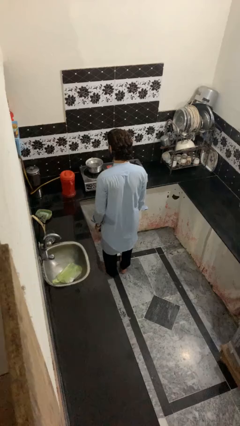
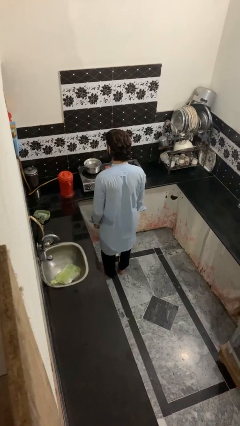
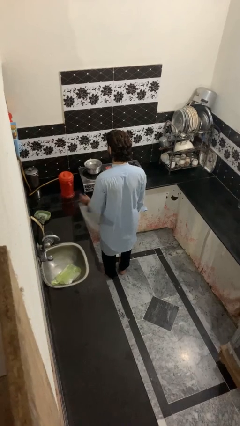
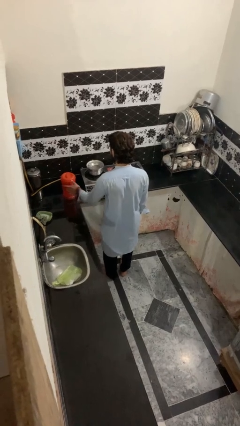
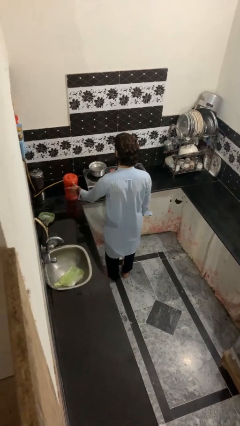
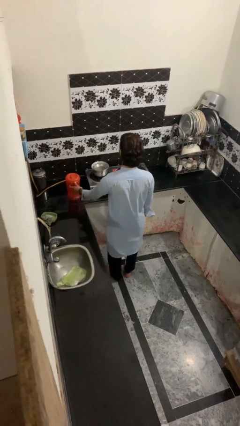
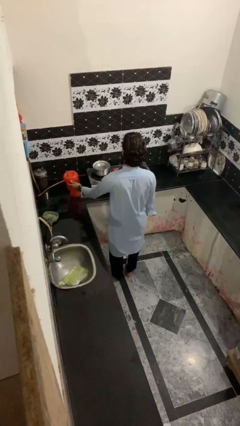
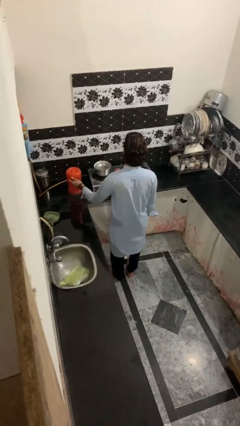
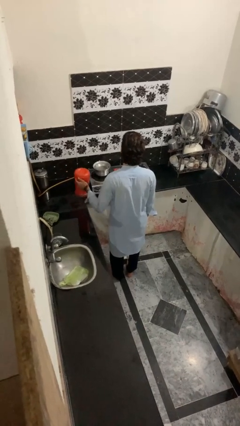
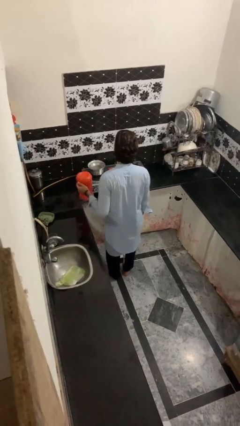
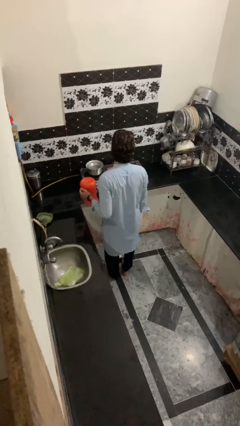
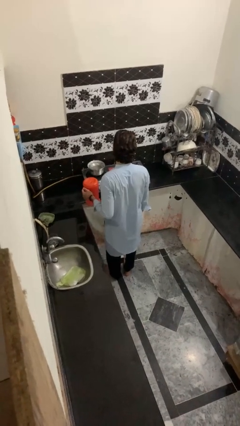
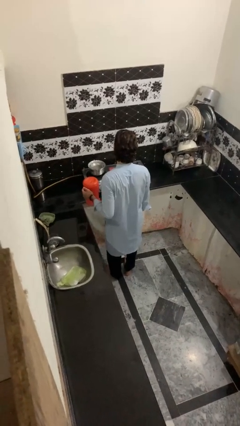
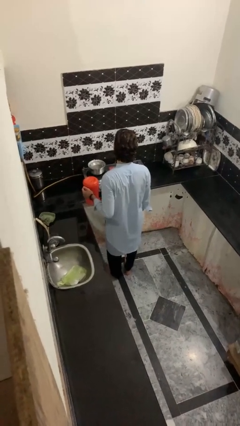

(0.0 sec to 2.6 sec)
person picks up object from countertop

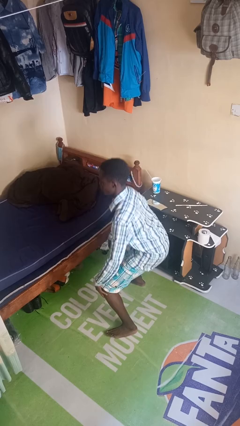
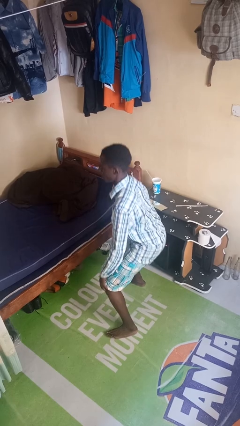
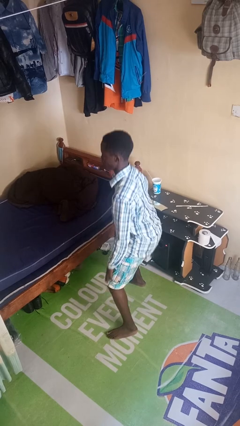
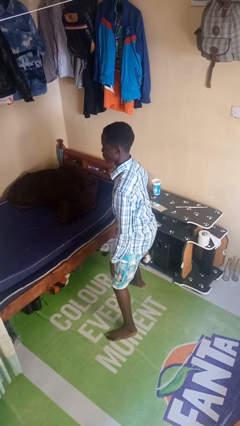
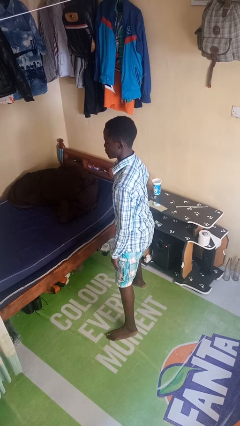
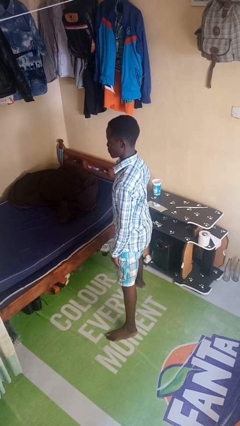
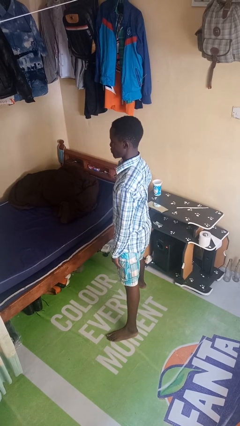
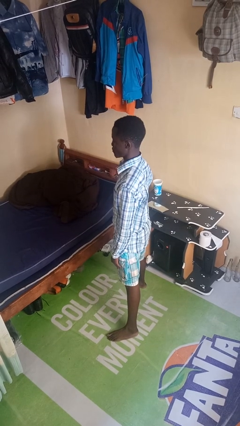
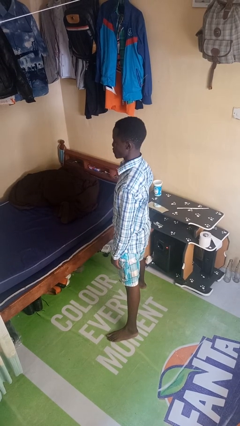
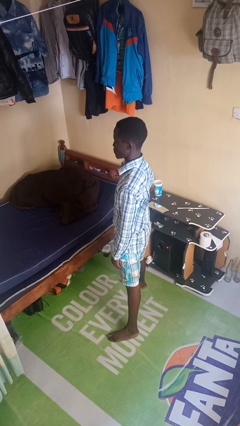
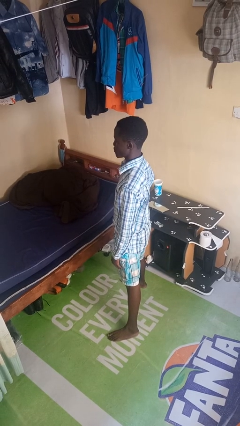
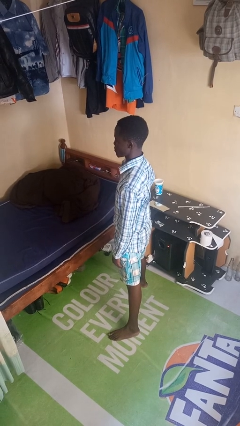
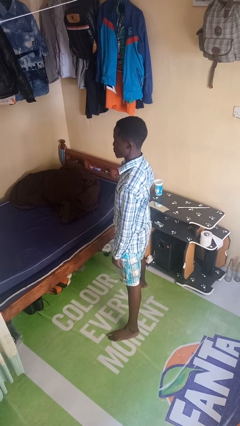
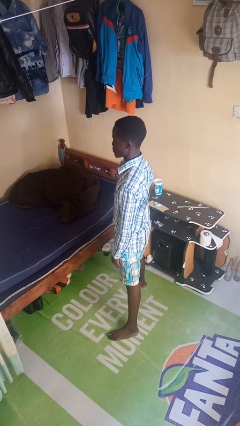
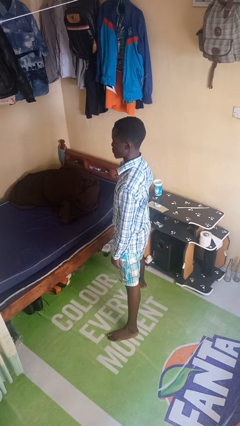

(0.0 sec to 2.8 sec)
person stands up

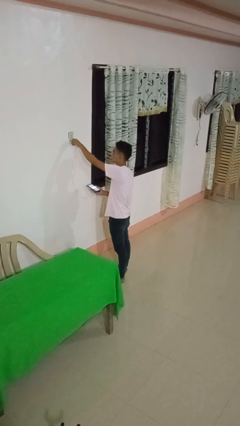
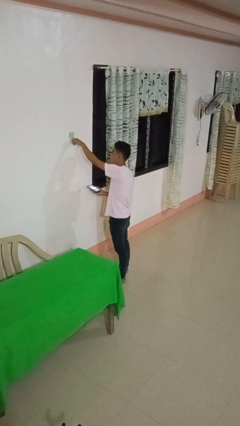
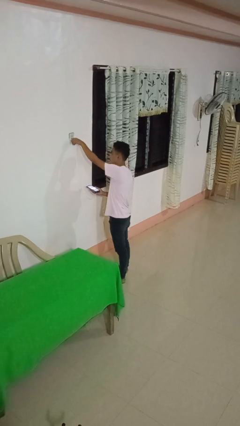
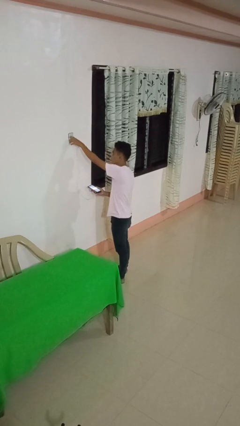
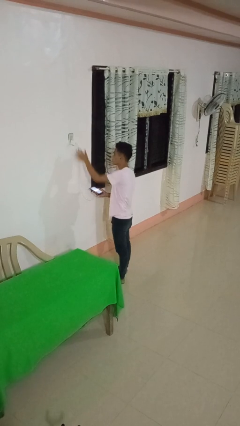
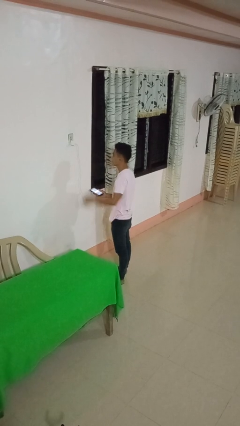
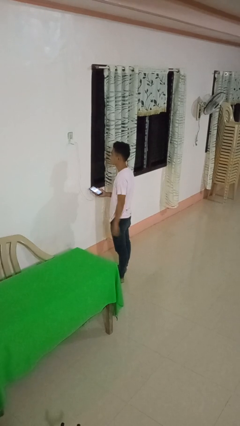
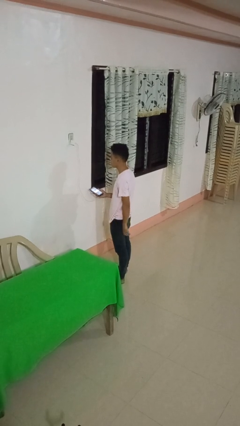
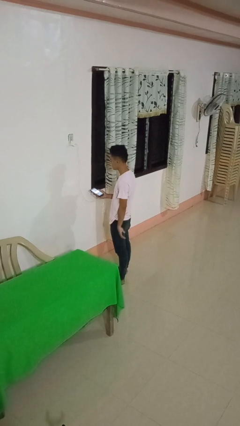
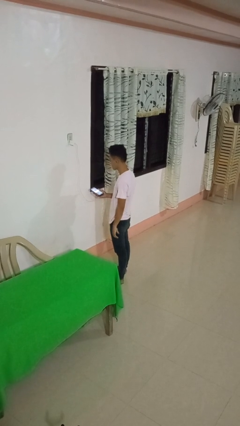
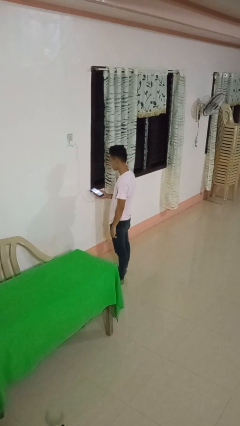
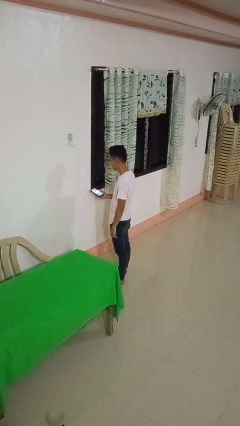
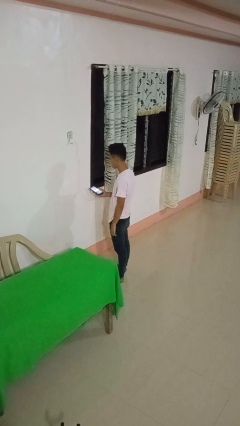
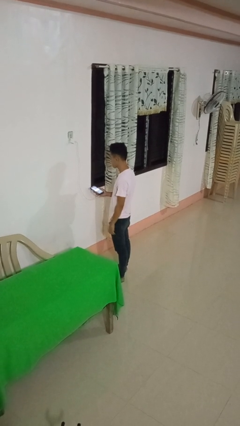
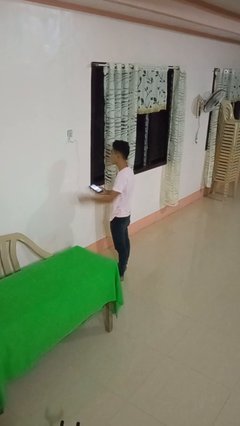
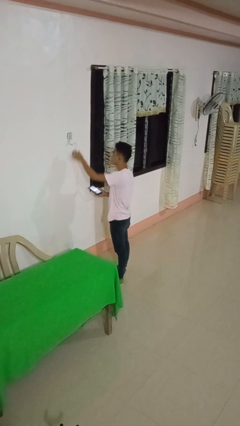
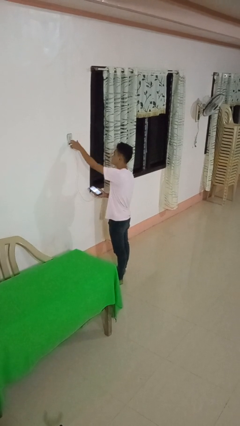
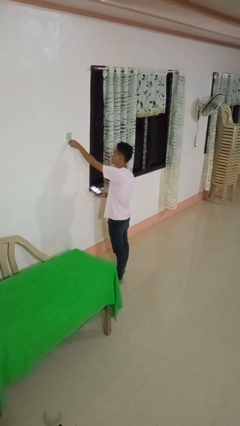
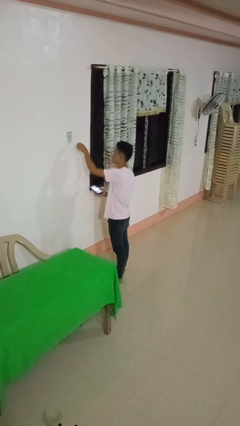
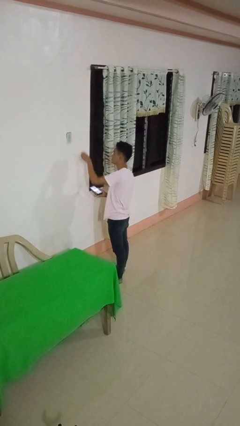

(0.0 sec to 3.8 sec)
person plugs into electrical socket

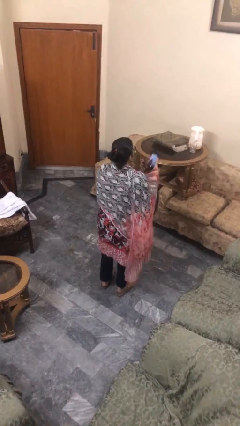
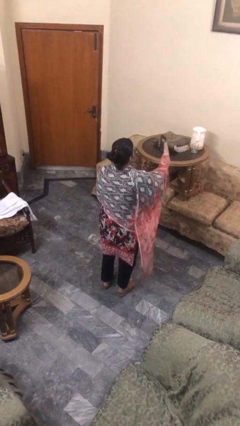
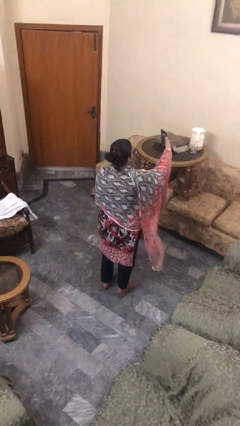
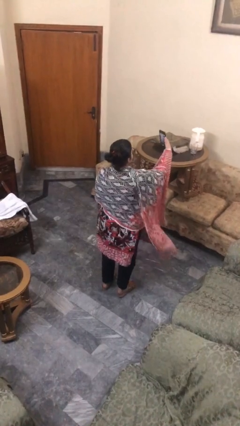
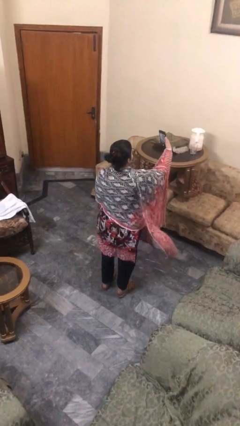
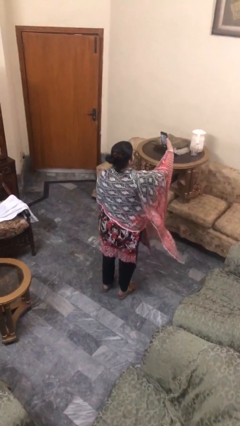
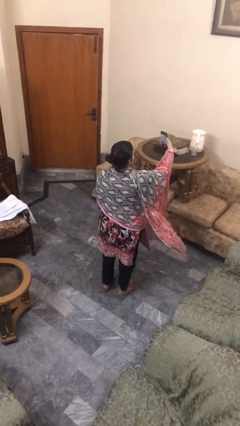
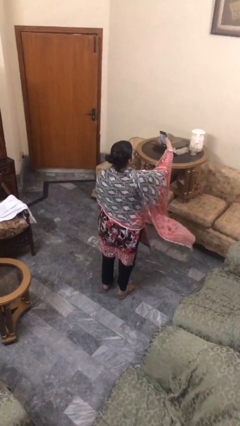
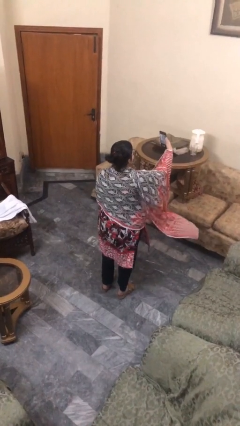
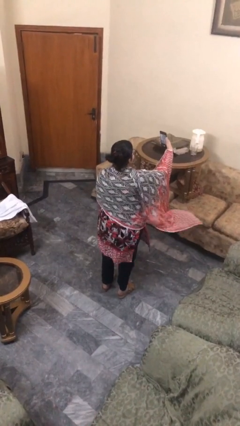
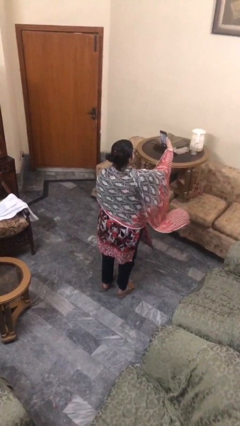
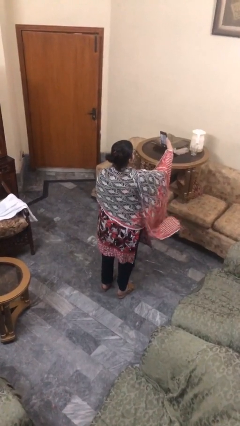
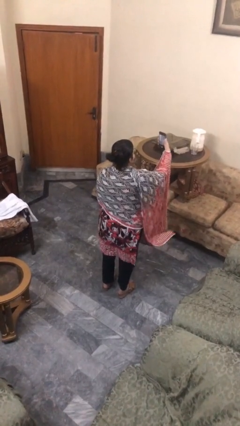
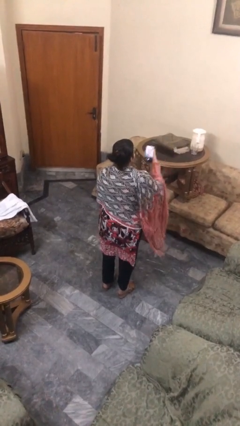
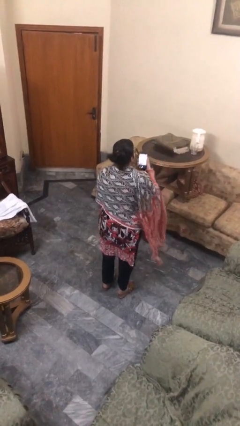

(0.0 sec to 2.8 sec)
person takes selfie

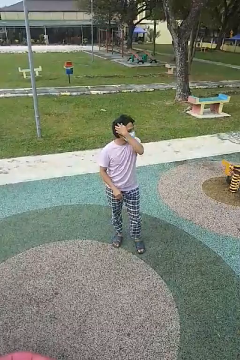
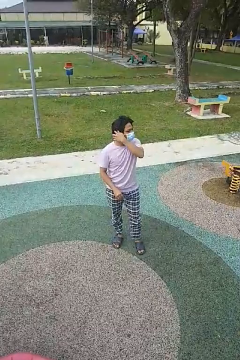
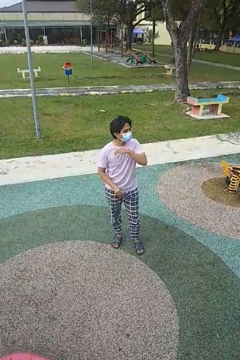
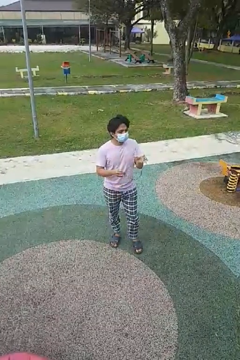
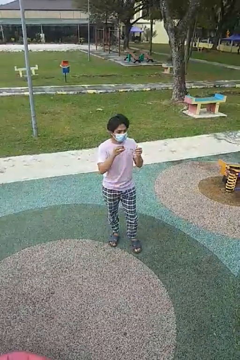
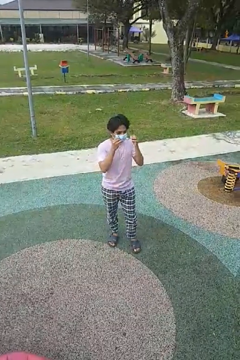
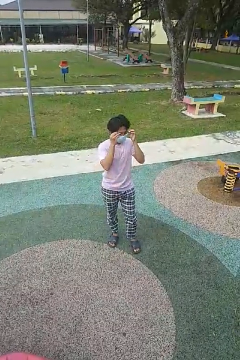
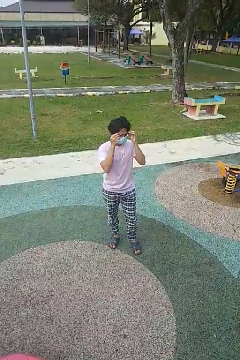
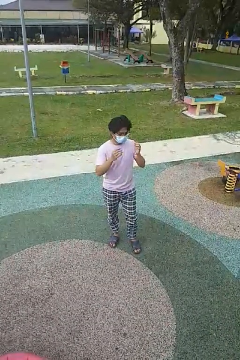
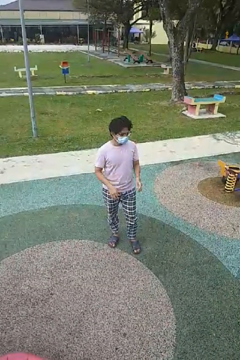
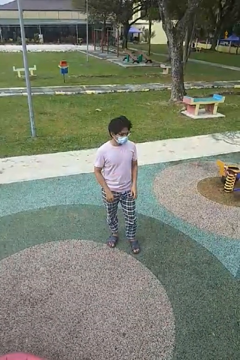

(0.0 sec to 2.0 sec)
person puts on glasses

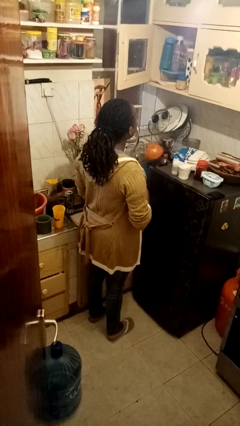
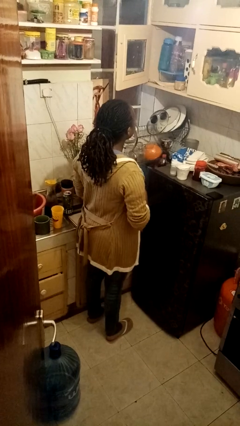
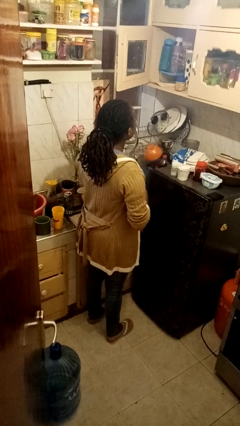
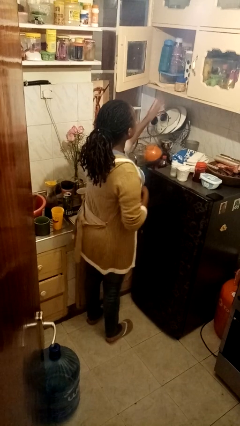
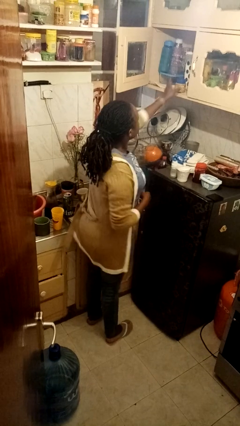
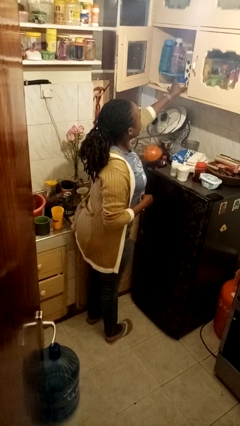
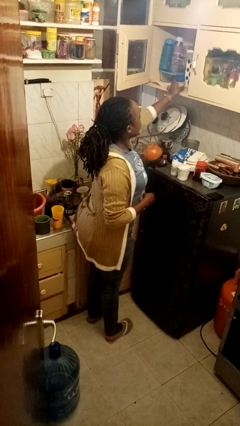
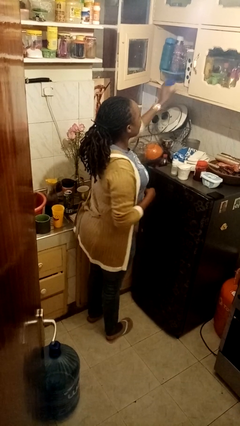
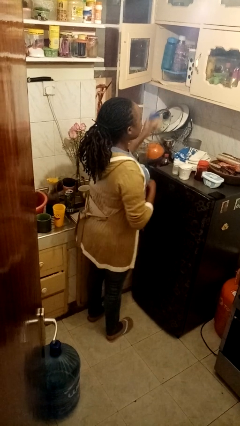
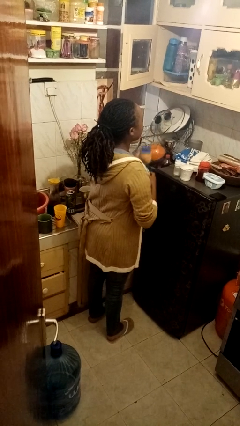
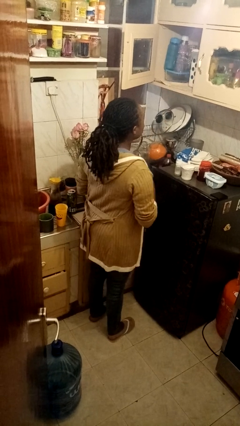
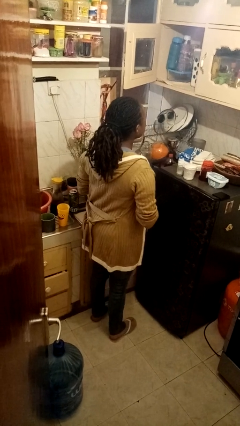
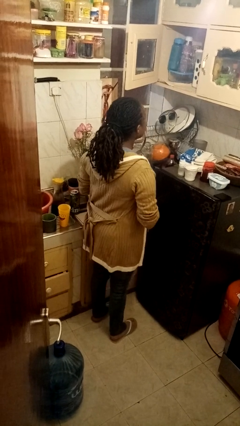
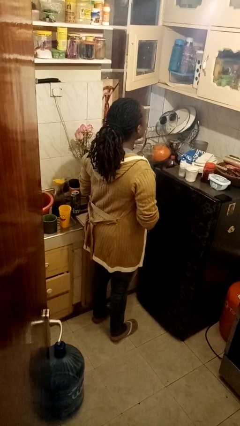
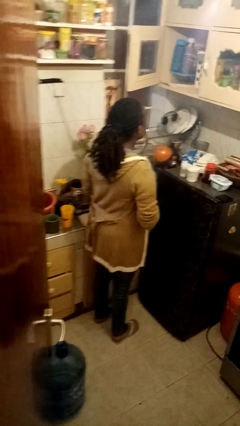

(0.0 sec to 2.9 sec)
person picks up object from cabinet

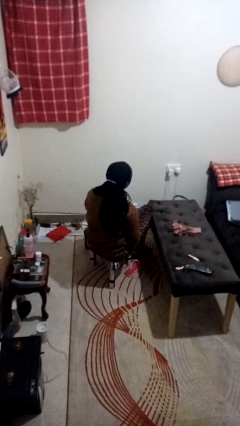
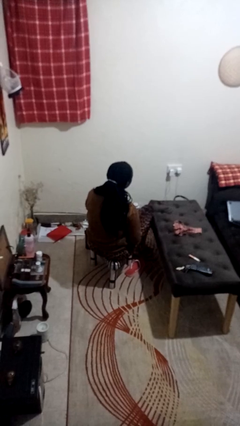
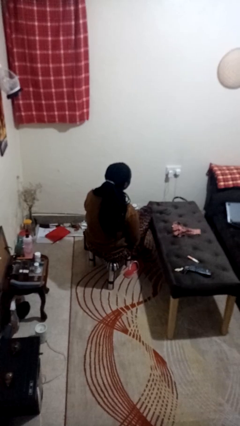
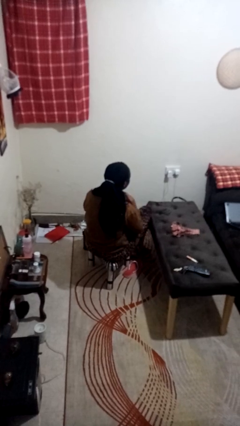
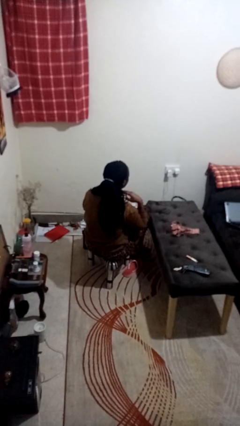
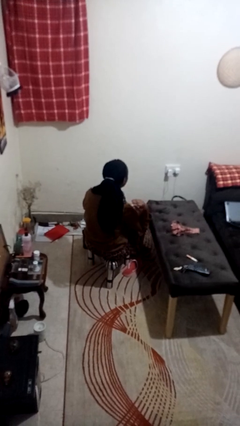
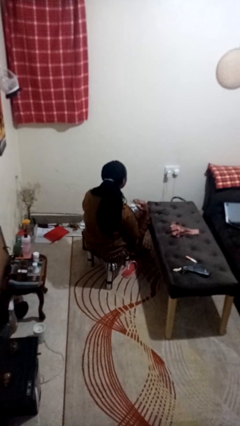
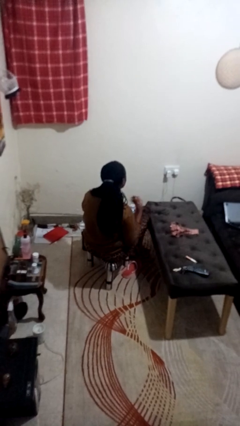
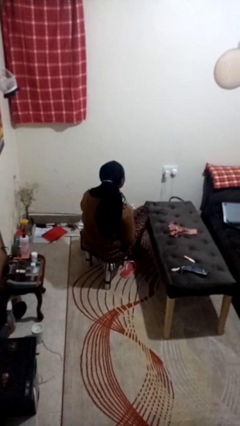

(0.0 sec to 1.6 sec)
person gestures cut
